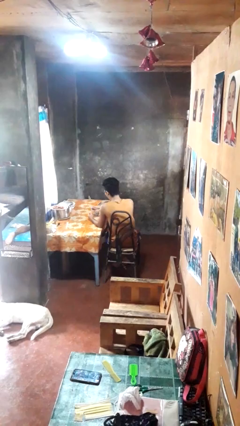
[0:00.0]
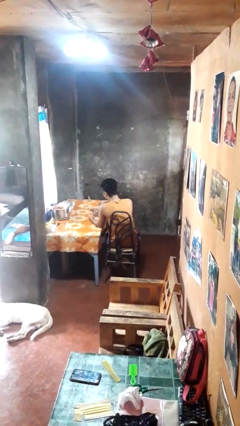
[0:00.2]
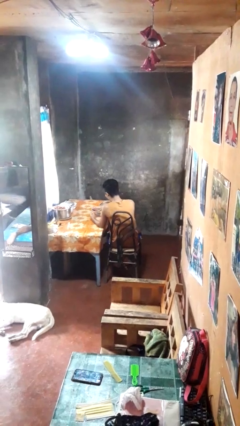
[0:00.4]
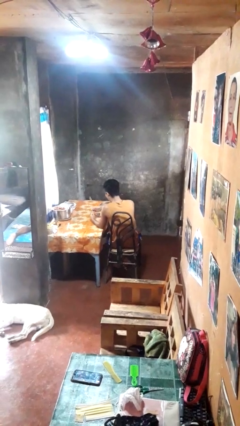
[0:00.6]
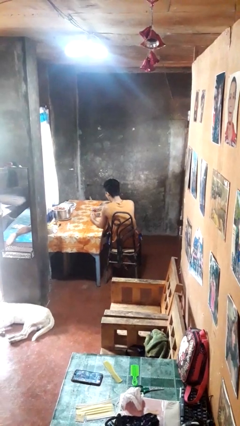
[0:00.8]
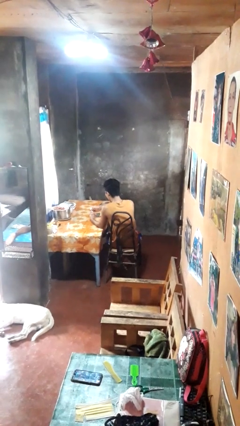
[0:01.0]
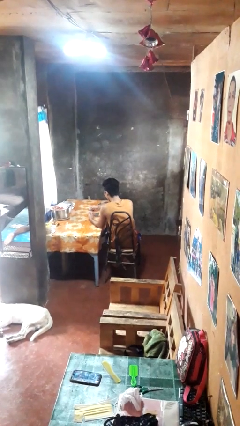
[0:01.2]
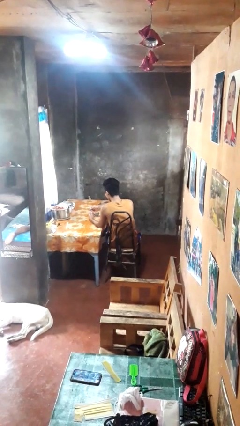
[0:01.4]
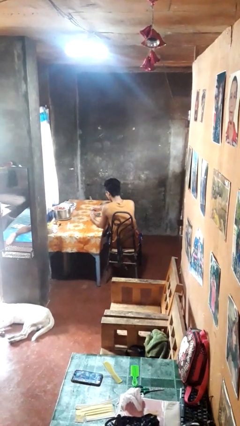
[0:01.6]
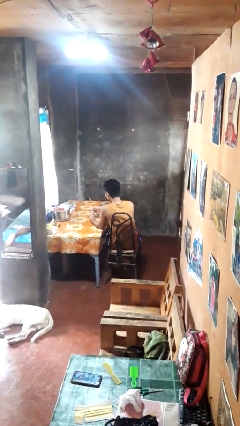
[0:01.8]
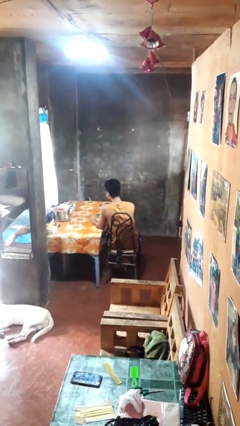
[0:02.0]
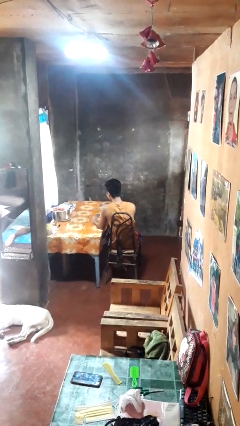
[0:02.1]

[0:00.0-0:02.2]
person clips fingernails

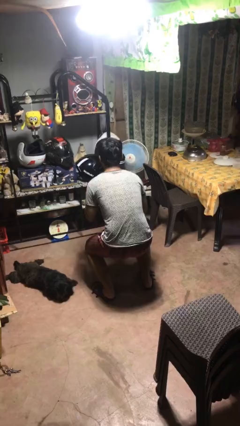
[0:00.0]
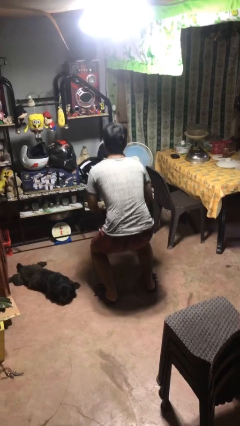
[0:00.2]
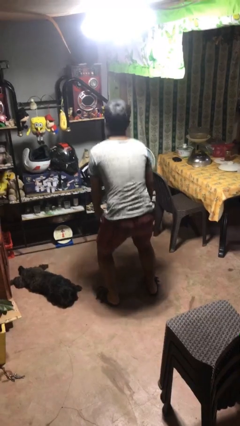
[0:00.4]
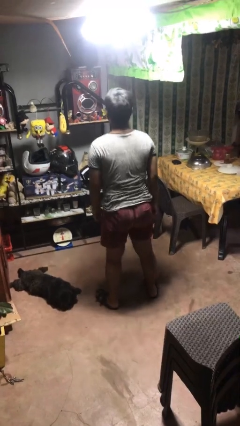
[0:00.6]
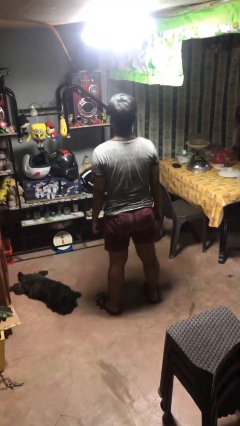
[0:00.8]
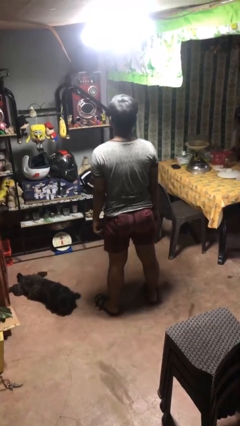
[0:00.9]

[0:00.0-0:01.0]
person stands up

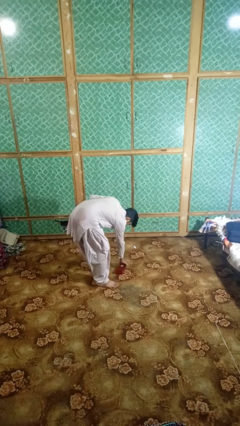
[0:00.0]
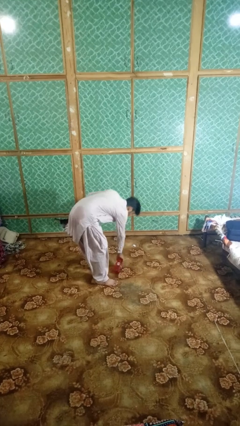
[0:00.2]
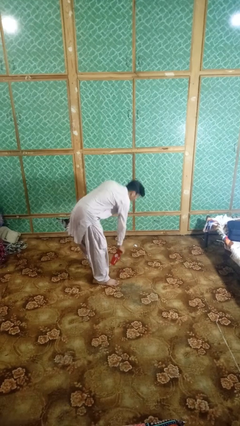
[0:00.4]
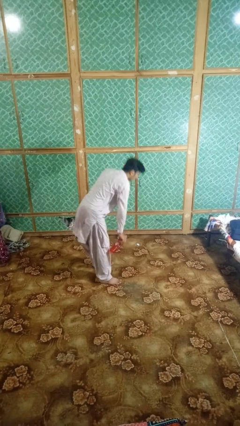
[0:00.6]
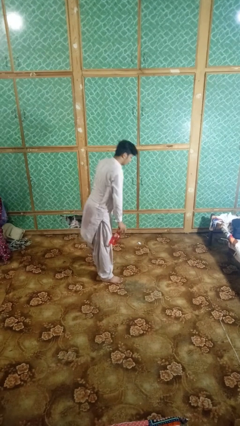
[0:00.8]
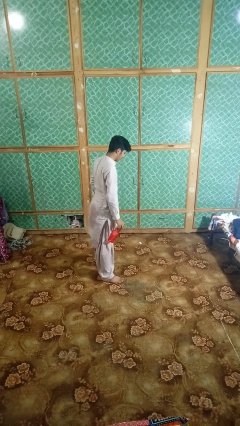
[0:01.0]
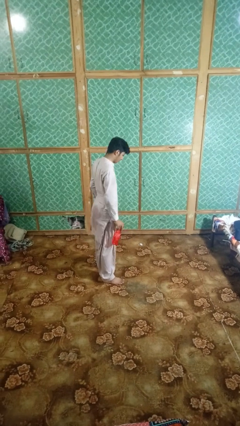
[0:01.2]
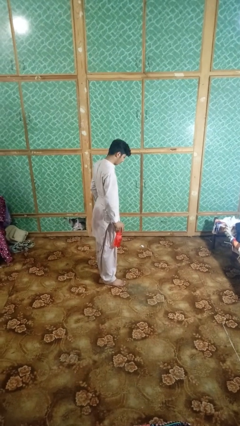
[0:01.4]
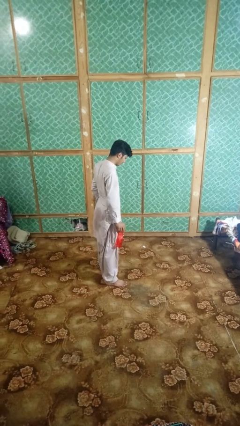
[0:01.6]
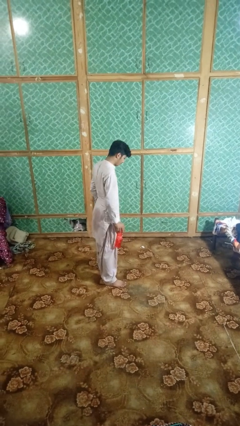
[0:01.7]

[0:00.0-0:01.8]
person picks up object from floor

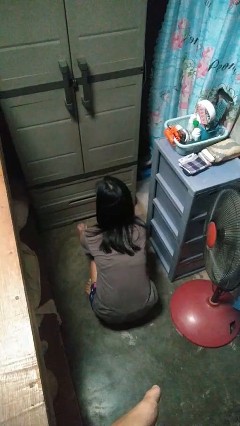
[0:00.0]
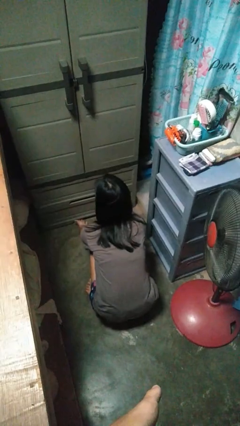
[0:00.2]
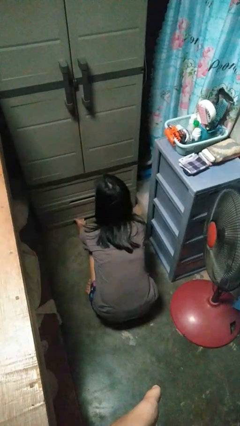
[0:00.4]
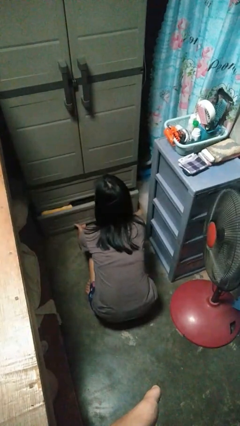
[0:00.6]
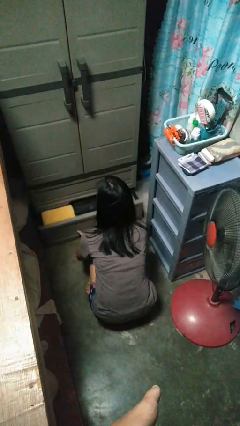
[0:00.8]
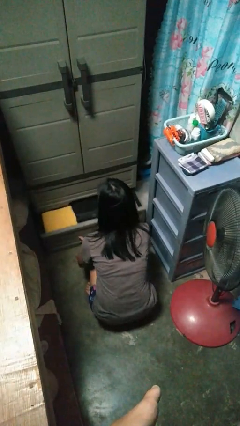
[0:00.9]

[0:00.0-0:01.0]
person opens dresser drawer

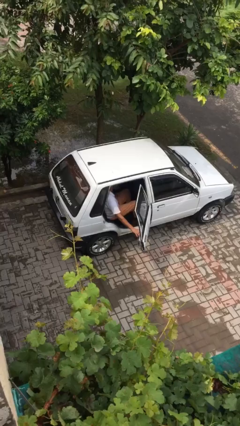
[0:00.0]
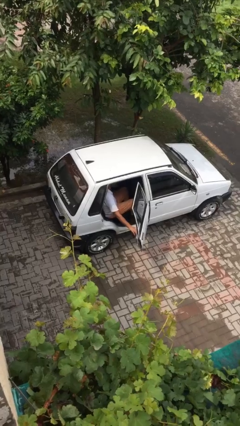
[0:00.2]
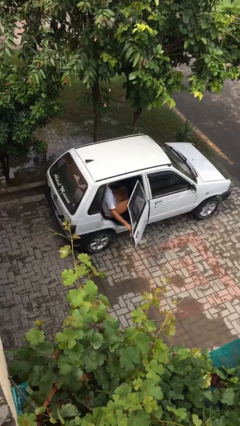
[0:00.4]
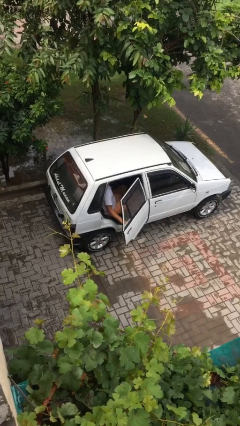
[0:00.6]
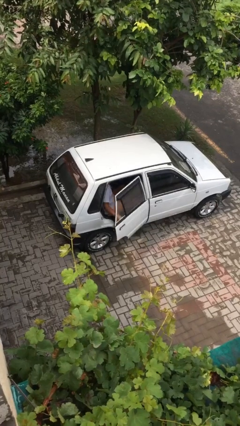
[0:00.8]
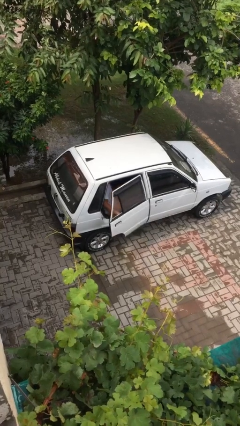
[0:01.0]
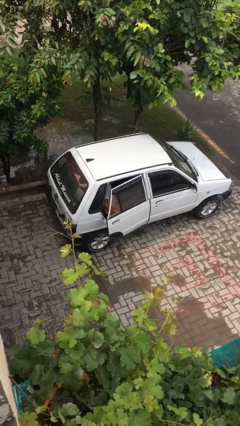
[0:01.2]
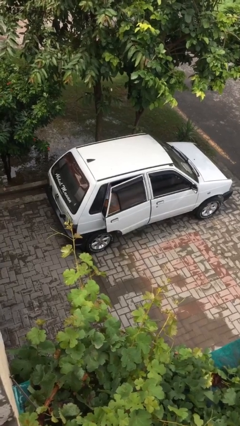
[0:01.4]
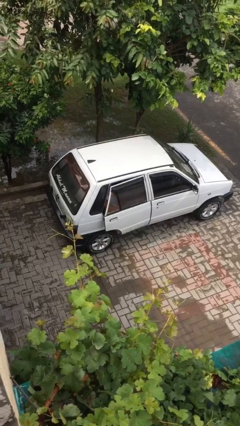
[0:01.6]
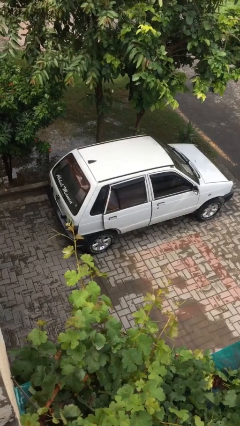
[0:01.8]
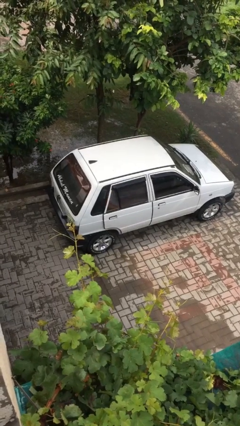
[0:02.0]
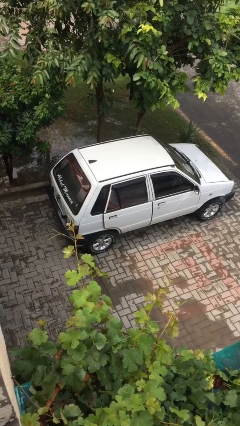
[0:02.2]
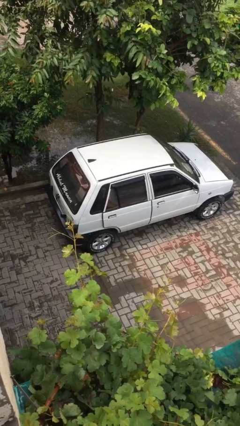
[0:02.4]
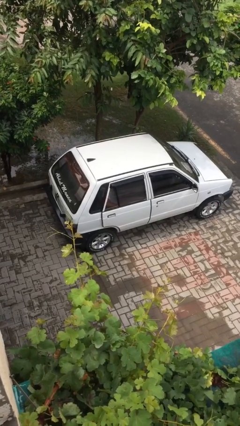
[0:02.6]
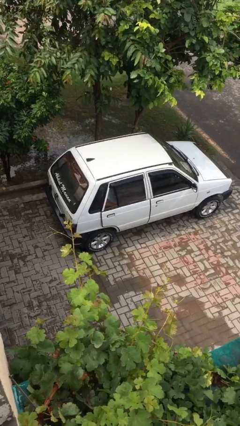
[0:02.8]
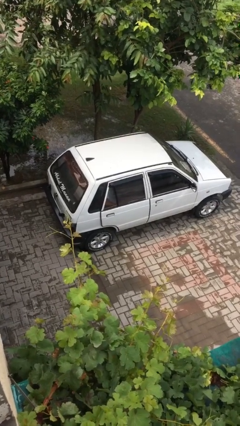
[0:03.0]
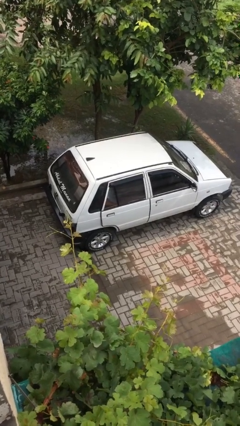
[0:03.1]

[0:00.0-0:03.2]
person closes car door

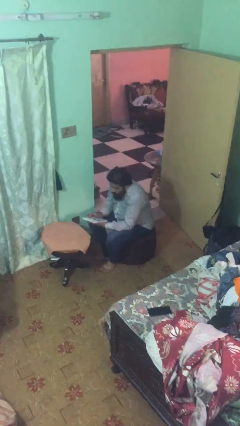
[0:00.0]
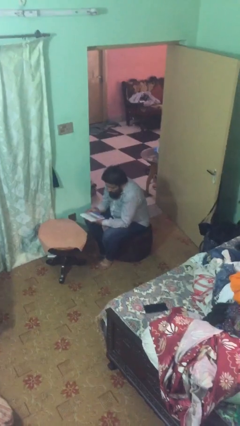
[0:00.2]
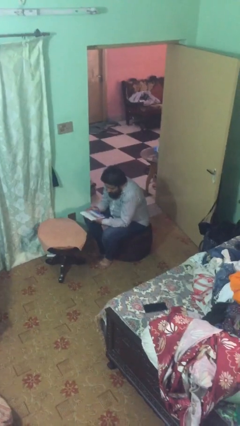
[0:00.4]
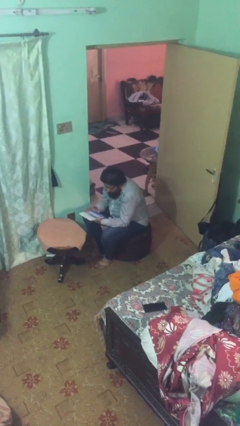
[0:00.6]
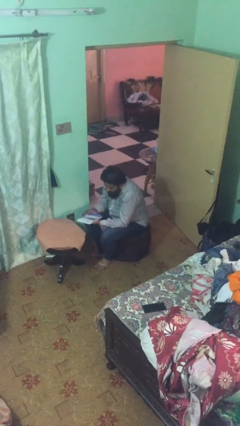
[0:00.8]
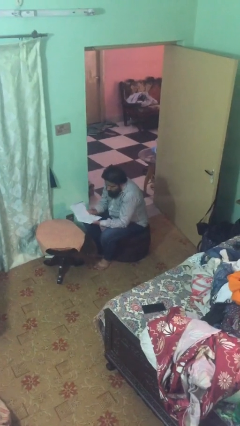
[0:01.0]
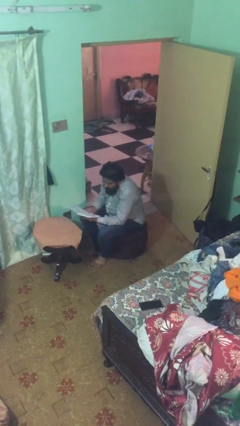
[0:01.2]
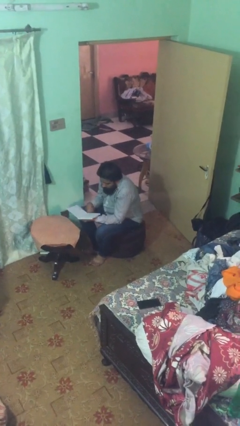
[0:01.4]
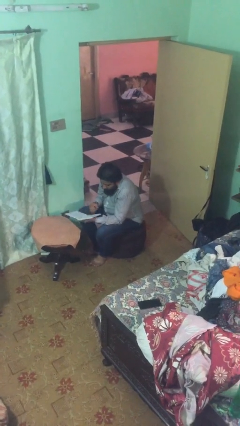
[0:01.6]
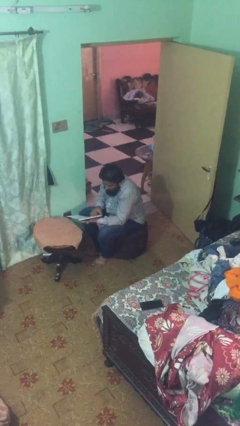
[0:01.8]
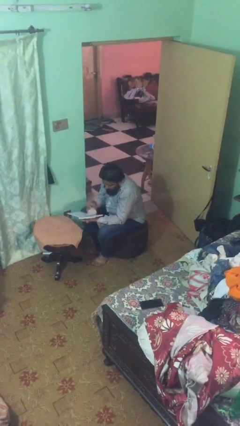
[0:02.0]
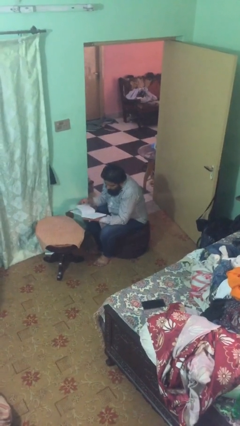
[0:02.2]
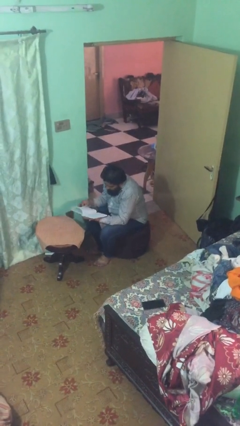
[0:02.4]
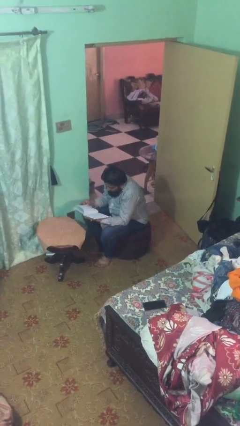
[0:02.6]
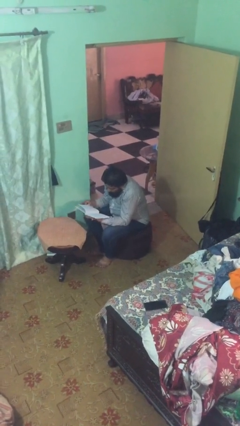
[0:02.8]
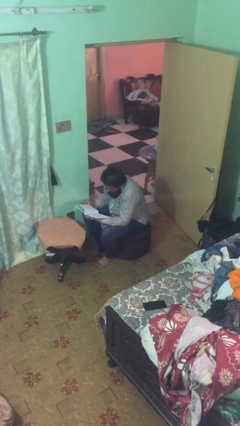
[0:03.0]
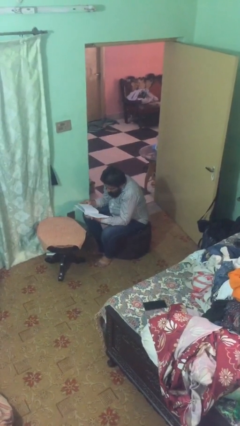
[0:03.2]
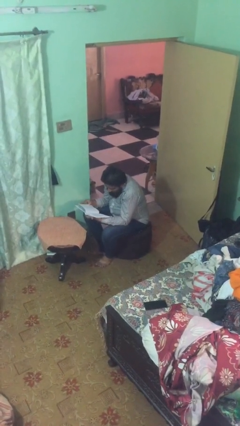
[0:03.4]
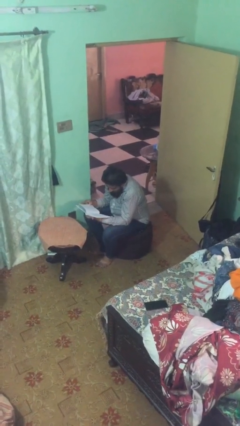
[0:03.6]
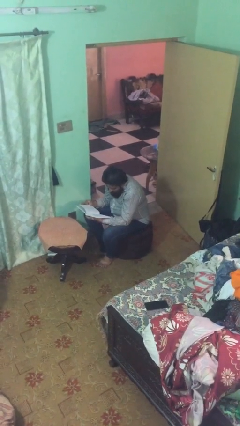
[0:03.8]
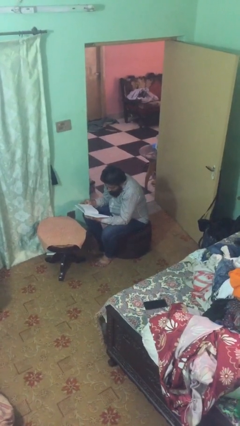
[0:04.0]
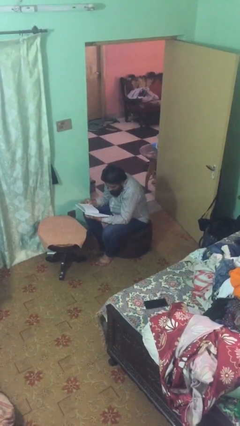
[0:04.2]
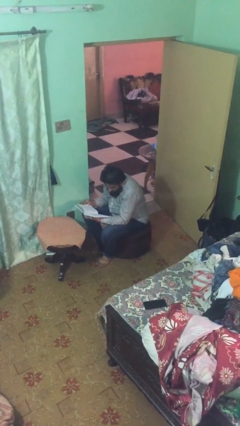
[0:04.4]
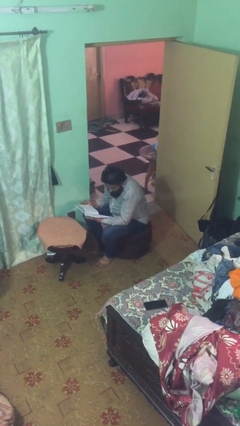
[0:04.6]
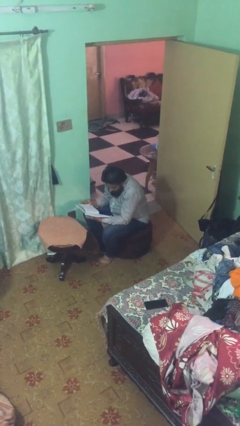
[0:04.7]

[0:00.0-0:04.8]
person reads document

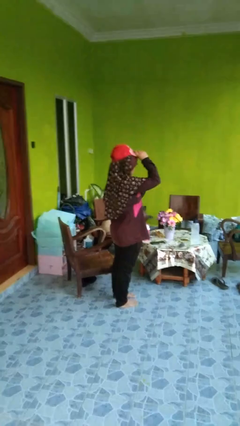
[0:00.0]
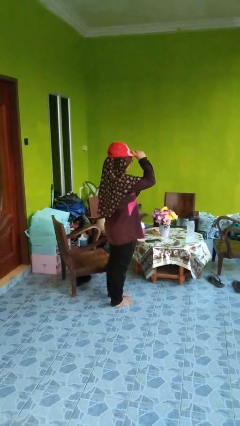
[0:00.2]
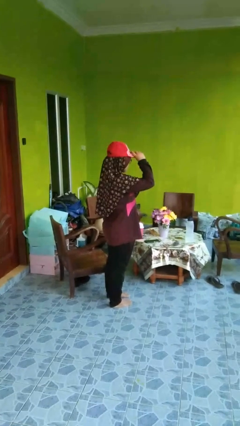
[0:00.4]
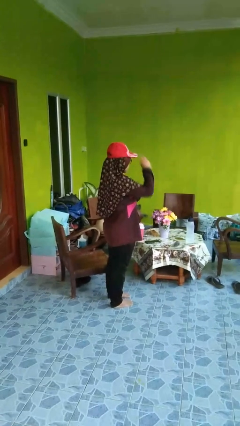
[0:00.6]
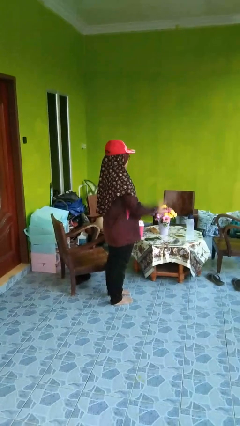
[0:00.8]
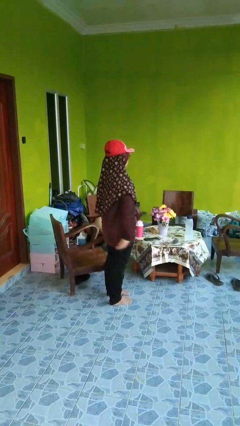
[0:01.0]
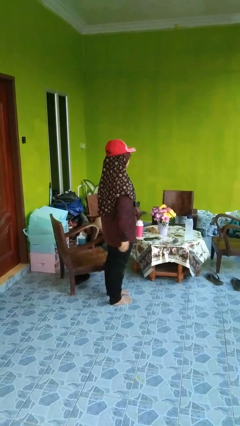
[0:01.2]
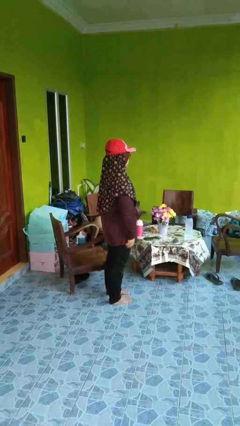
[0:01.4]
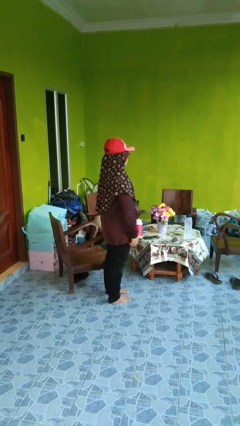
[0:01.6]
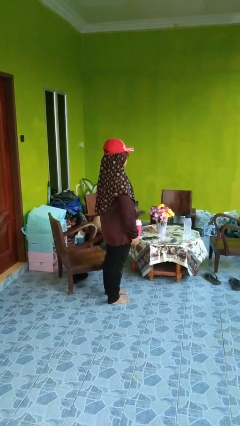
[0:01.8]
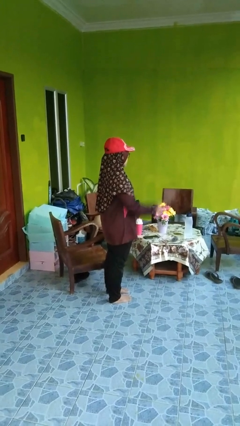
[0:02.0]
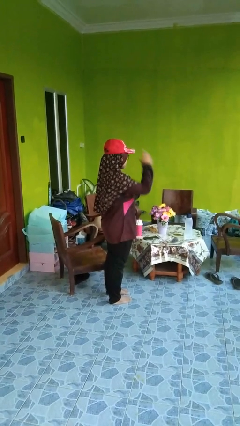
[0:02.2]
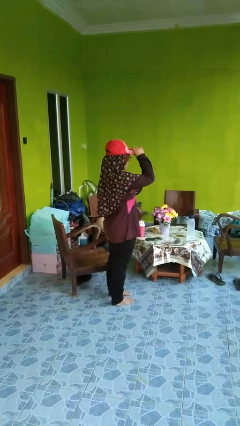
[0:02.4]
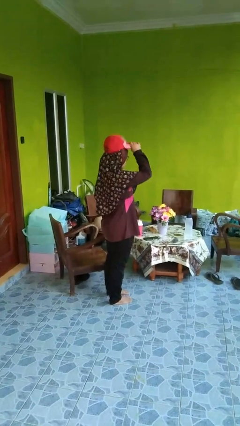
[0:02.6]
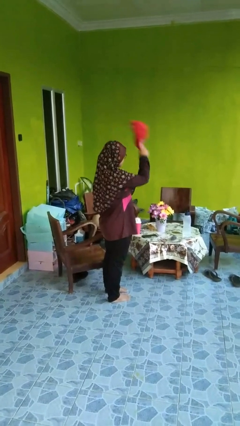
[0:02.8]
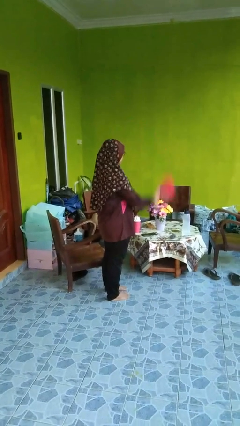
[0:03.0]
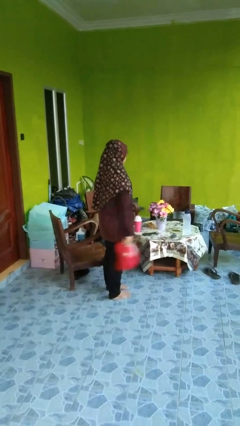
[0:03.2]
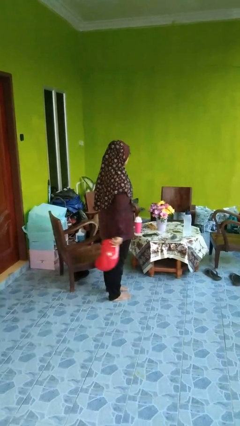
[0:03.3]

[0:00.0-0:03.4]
person puts on hat
